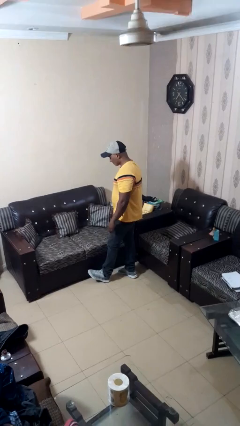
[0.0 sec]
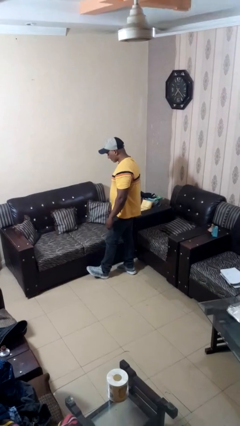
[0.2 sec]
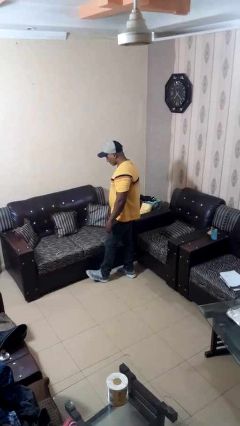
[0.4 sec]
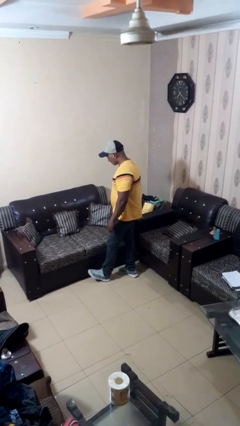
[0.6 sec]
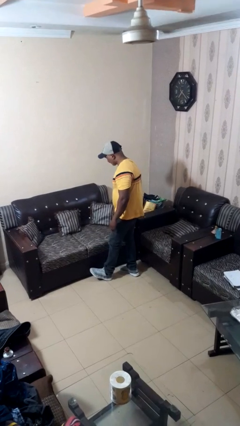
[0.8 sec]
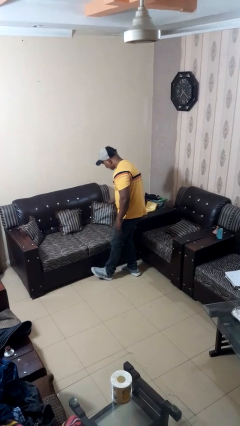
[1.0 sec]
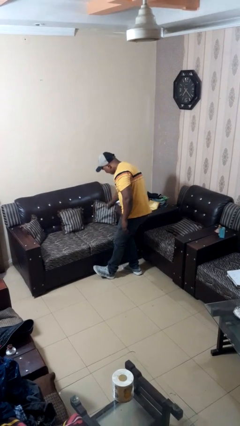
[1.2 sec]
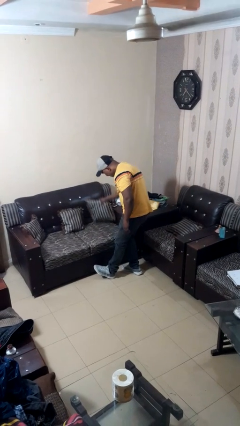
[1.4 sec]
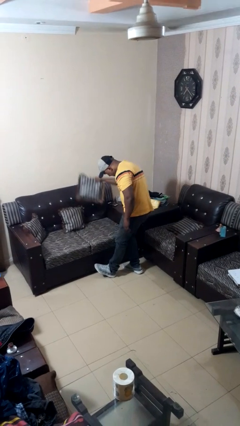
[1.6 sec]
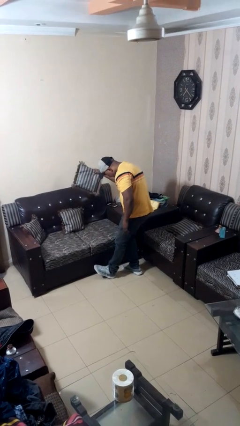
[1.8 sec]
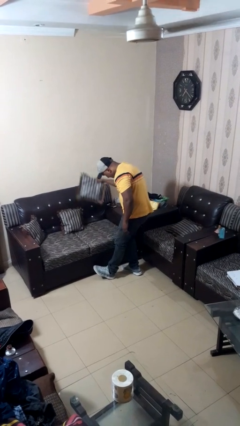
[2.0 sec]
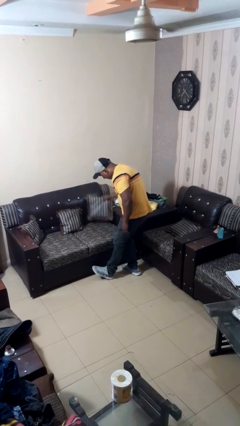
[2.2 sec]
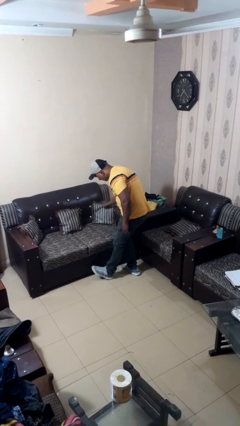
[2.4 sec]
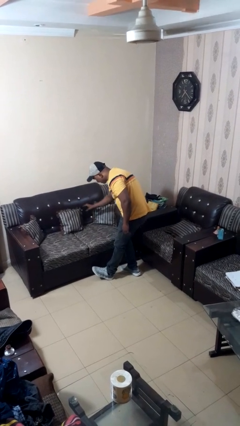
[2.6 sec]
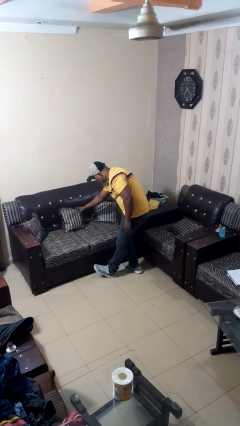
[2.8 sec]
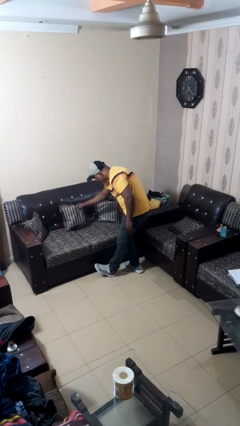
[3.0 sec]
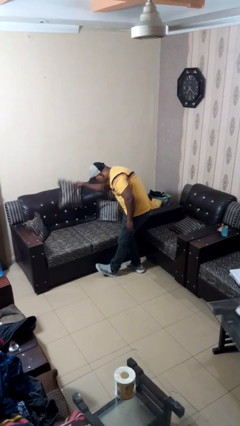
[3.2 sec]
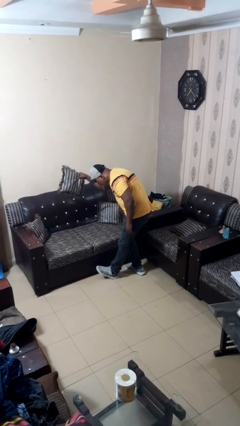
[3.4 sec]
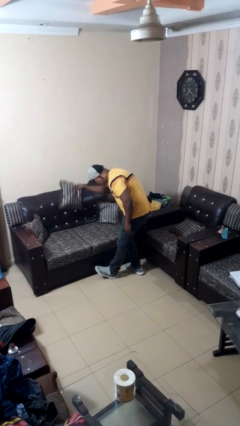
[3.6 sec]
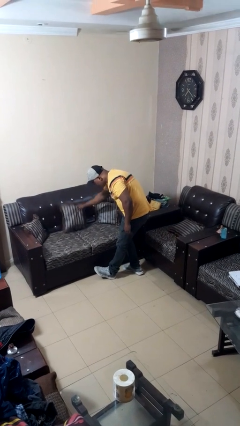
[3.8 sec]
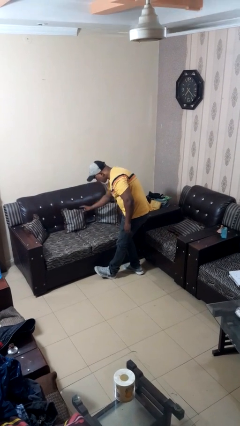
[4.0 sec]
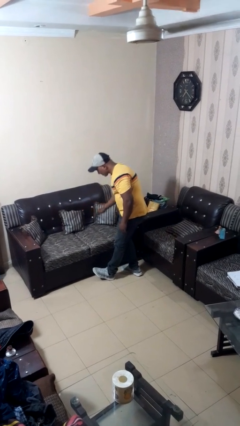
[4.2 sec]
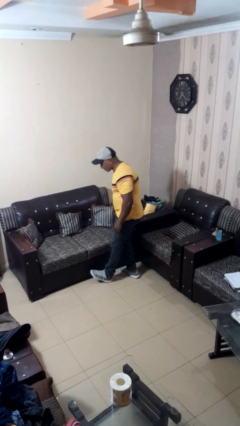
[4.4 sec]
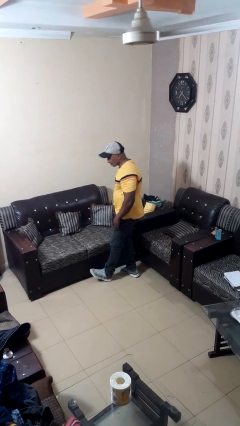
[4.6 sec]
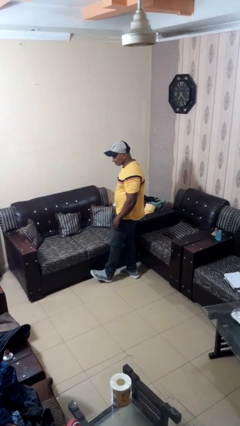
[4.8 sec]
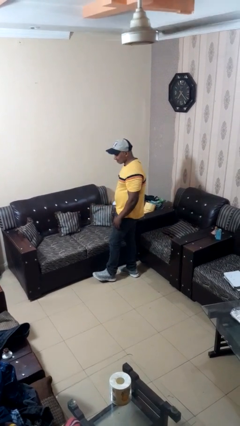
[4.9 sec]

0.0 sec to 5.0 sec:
person searches in couch

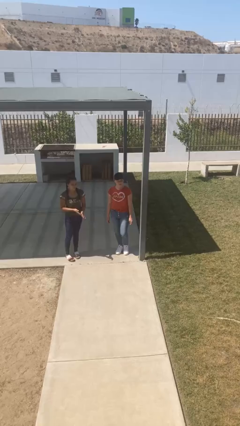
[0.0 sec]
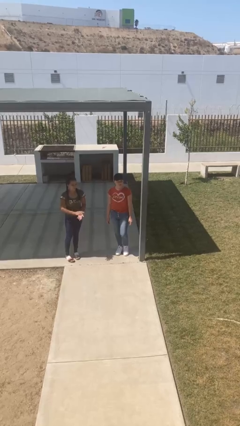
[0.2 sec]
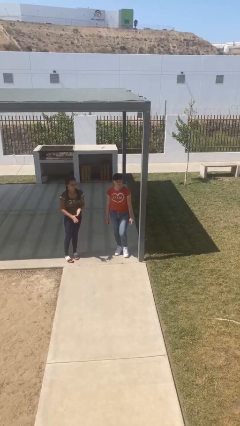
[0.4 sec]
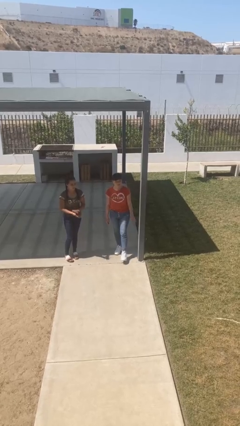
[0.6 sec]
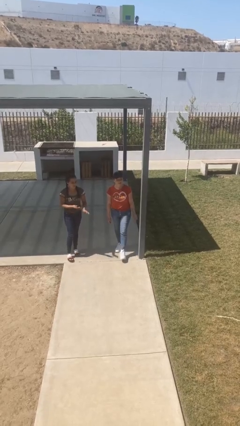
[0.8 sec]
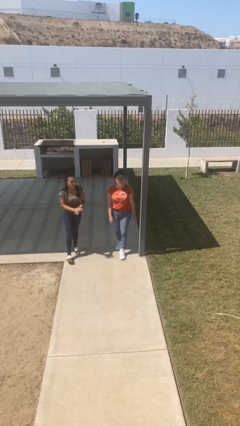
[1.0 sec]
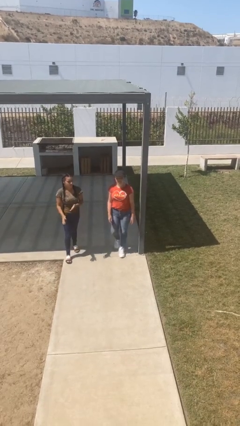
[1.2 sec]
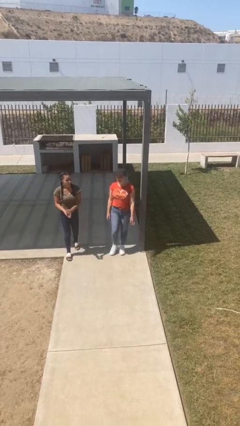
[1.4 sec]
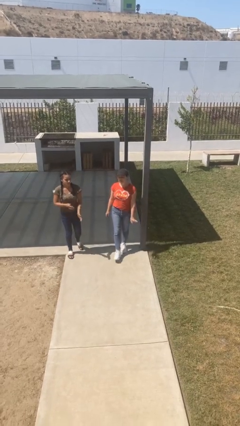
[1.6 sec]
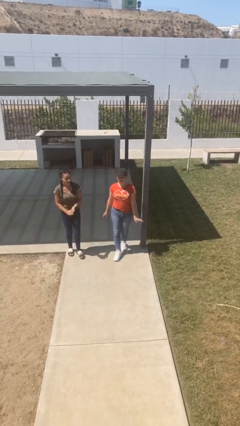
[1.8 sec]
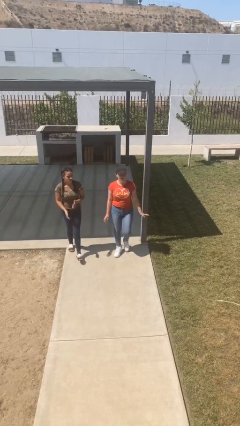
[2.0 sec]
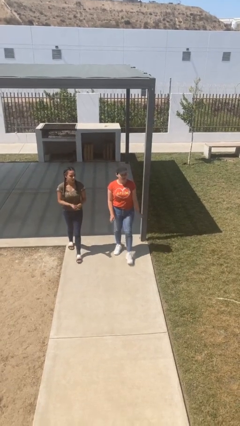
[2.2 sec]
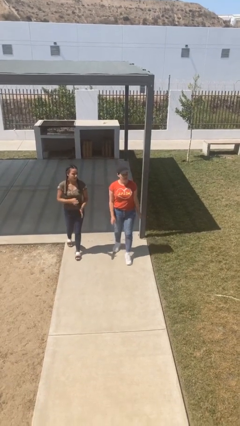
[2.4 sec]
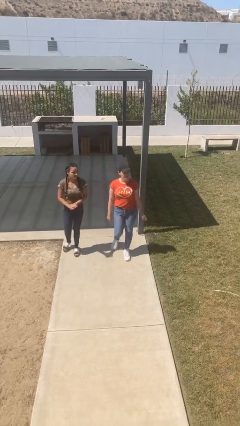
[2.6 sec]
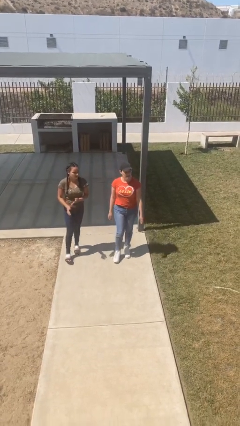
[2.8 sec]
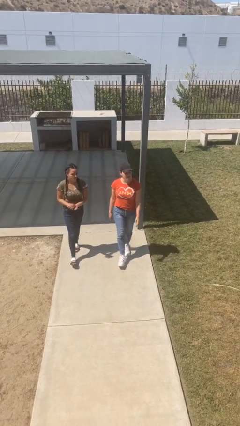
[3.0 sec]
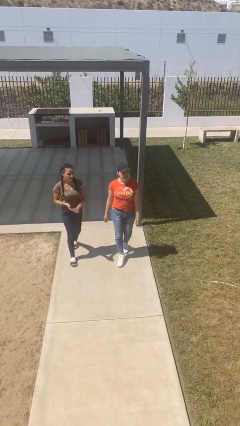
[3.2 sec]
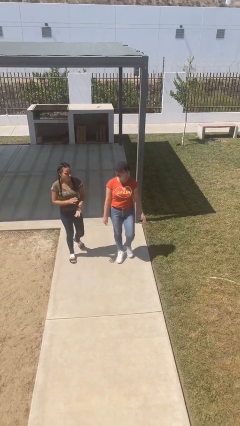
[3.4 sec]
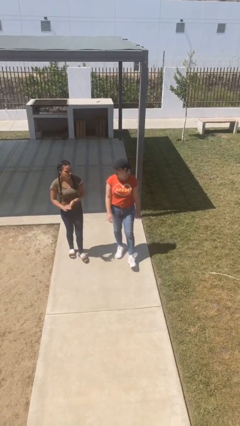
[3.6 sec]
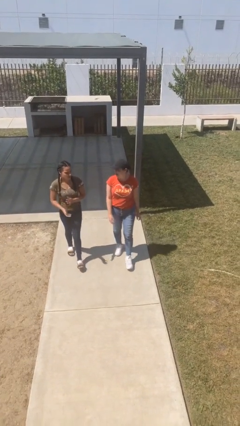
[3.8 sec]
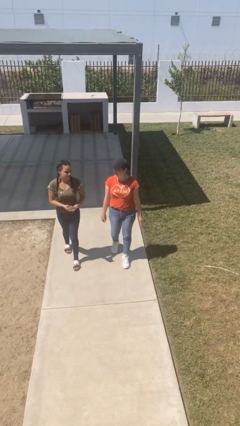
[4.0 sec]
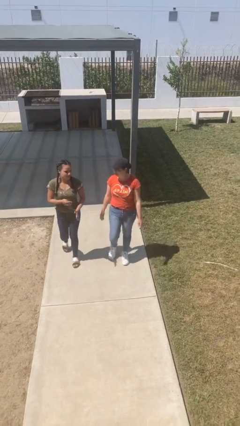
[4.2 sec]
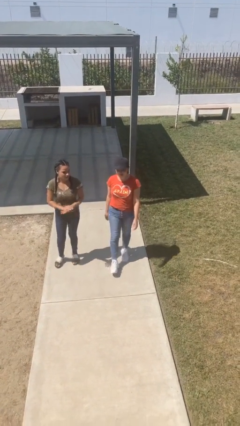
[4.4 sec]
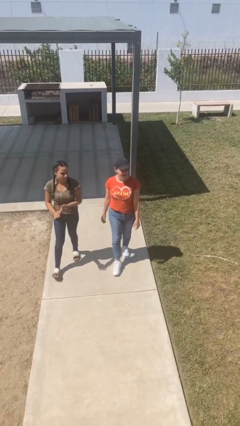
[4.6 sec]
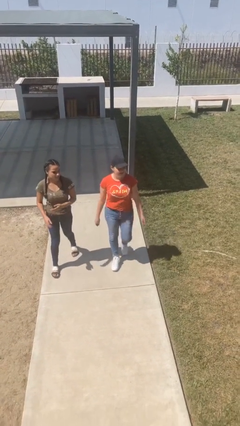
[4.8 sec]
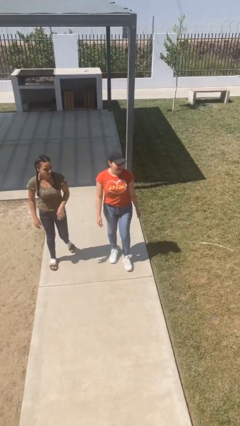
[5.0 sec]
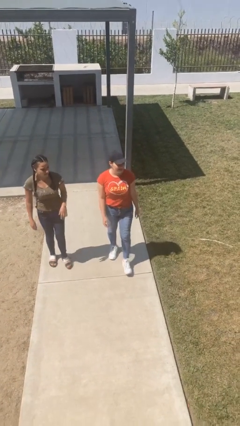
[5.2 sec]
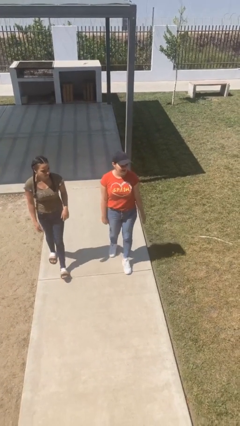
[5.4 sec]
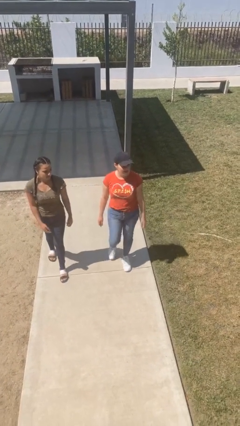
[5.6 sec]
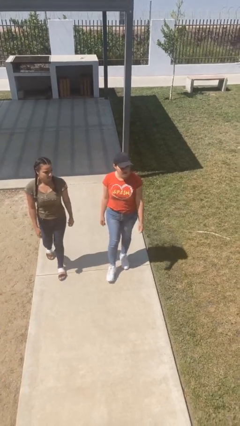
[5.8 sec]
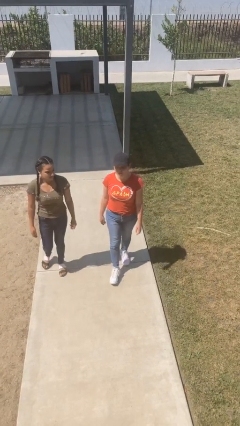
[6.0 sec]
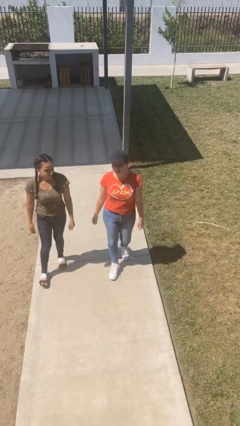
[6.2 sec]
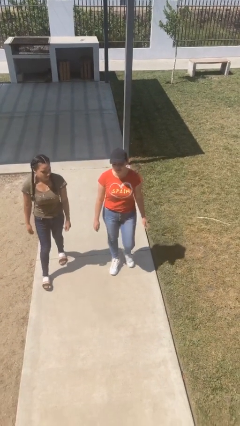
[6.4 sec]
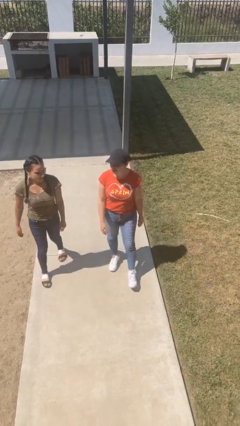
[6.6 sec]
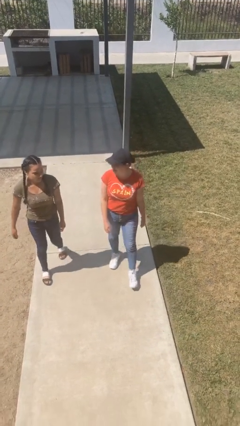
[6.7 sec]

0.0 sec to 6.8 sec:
person talks to person

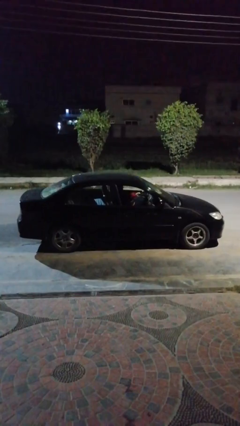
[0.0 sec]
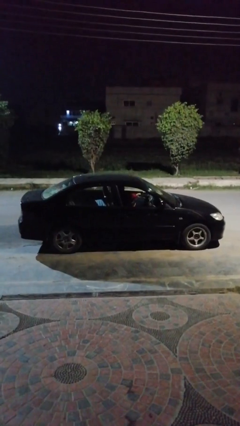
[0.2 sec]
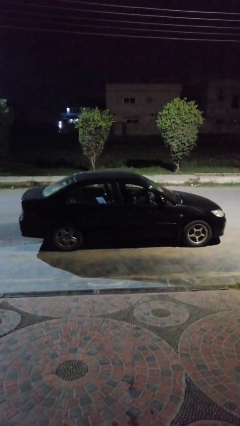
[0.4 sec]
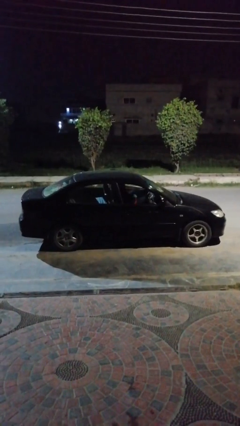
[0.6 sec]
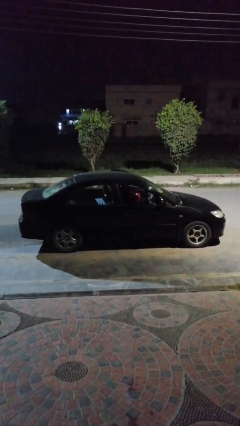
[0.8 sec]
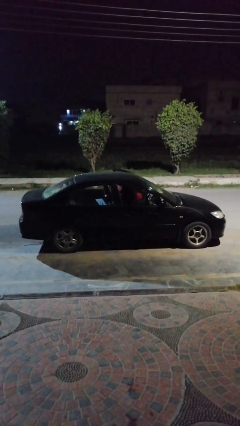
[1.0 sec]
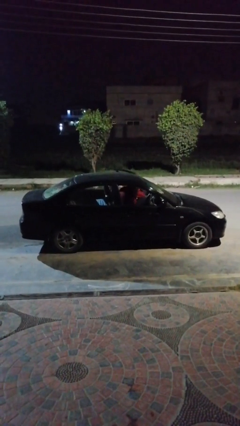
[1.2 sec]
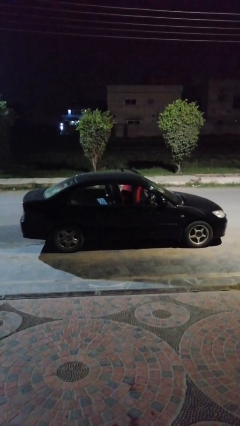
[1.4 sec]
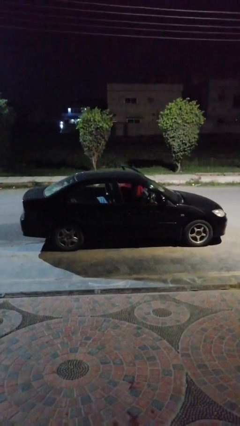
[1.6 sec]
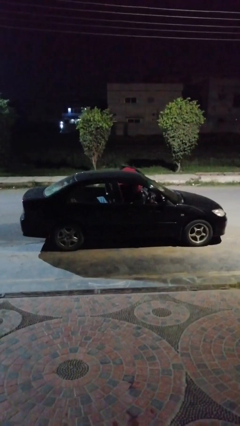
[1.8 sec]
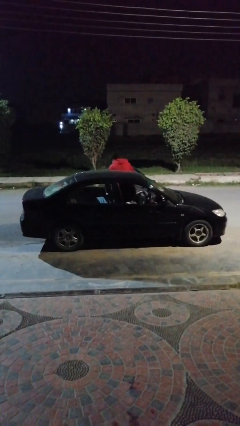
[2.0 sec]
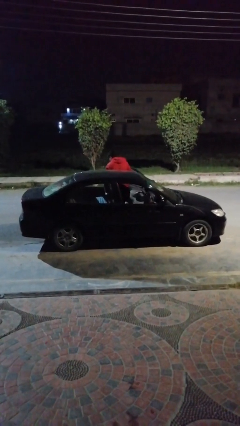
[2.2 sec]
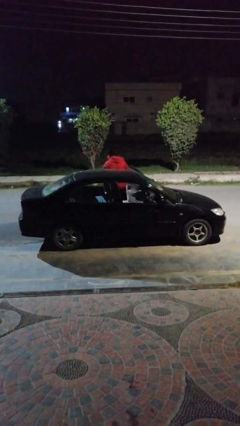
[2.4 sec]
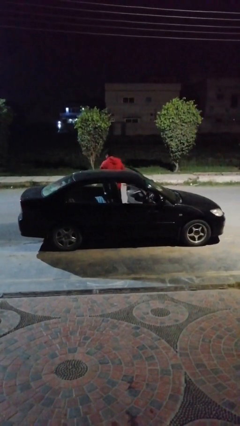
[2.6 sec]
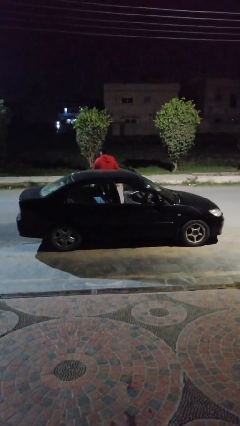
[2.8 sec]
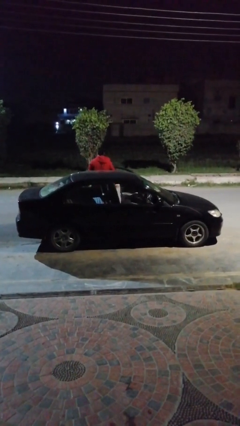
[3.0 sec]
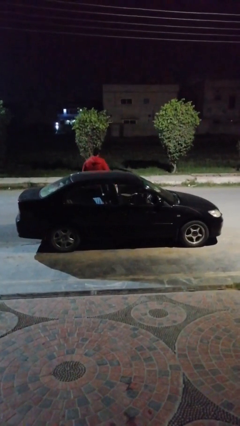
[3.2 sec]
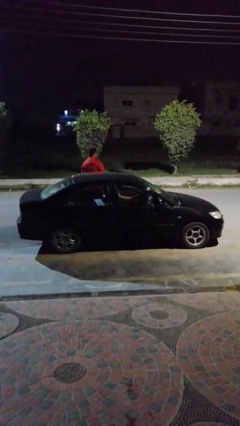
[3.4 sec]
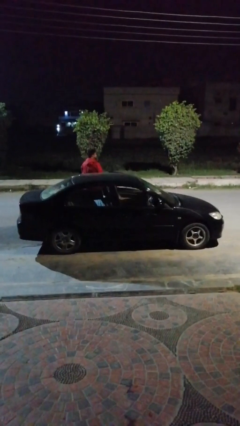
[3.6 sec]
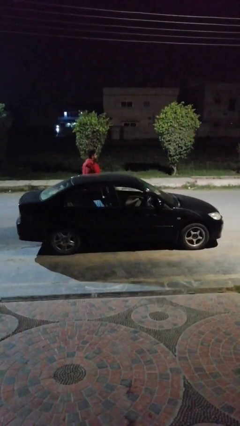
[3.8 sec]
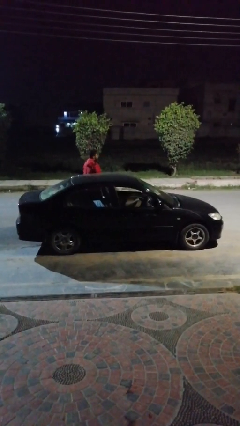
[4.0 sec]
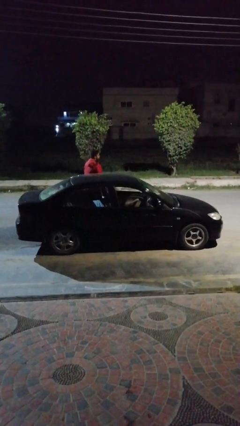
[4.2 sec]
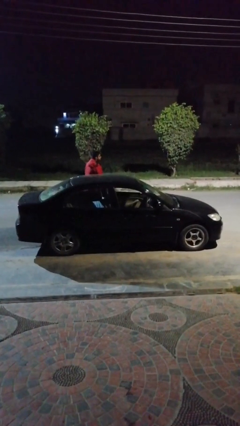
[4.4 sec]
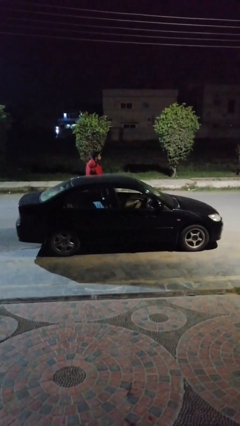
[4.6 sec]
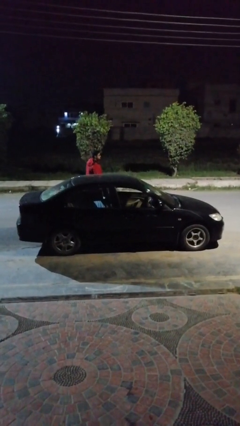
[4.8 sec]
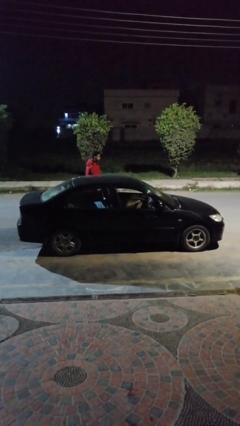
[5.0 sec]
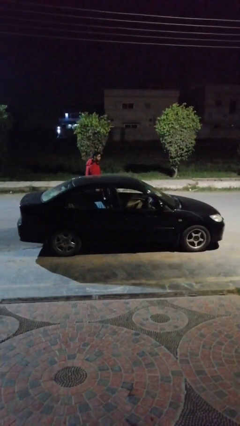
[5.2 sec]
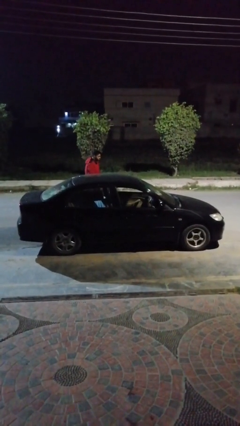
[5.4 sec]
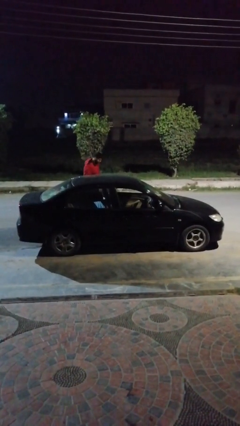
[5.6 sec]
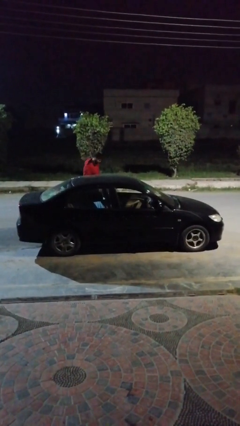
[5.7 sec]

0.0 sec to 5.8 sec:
car drops off person
